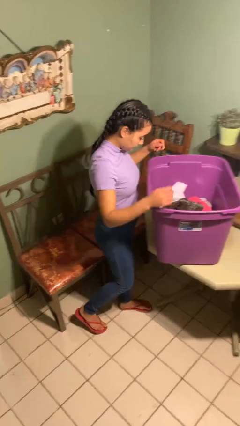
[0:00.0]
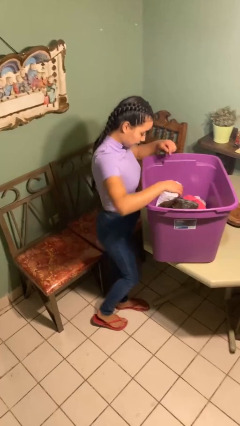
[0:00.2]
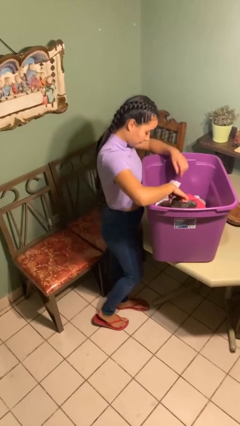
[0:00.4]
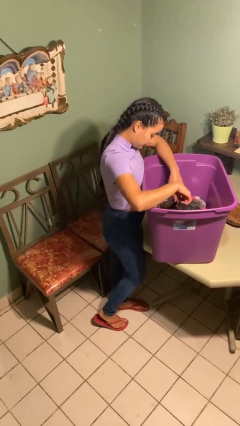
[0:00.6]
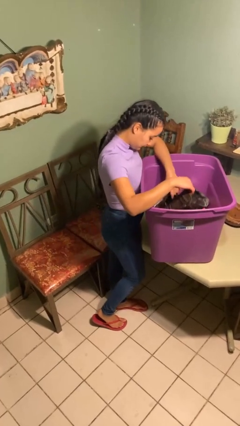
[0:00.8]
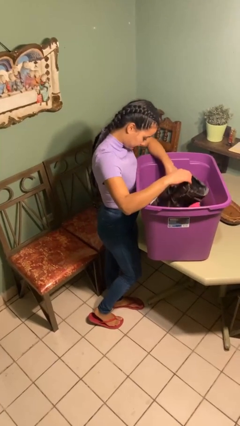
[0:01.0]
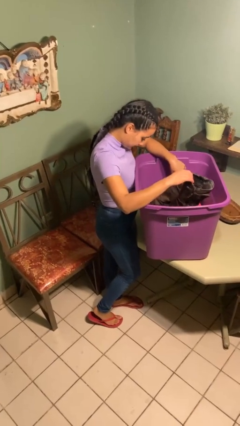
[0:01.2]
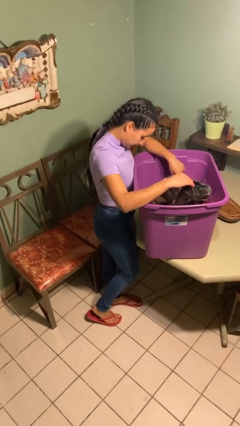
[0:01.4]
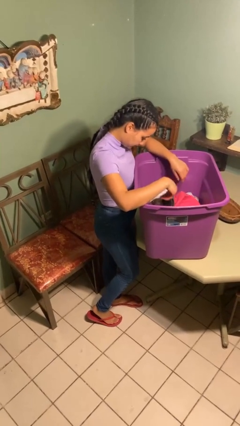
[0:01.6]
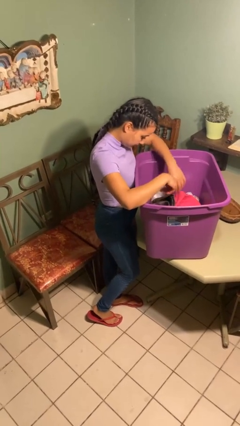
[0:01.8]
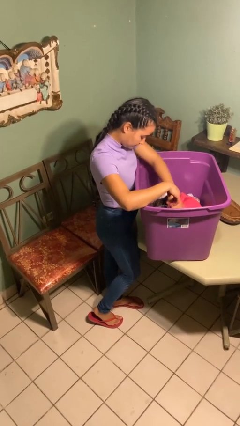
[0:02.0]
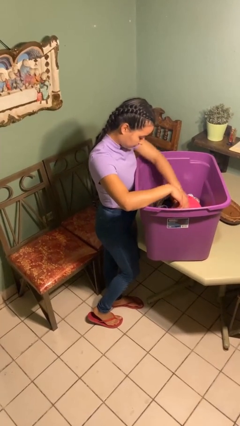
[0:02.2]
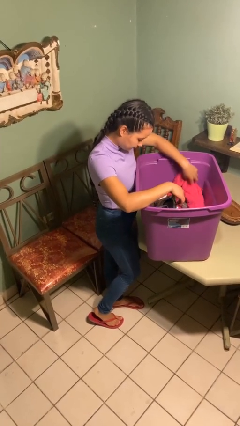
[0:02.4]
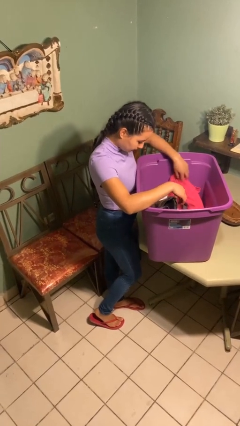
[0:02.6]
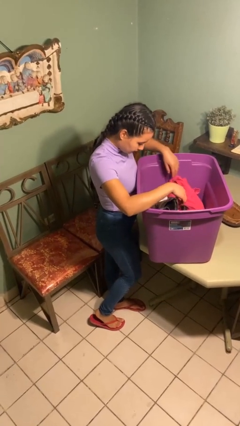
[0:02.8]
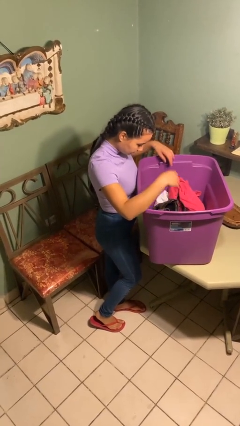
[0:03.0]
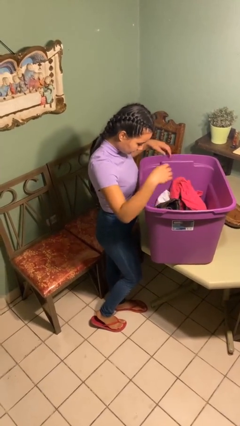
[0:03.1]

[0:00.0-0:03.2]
person searches in box

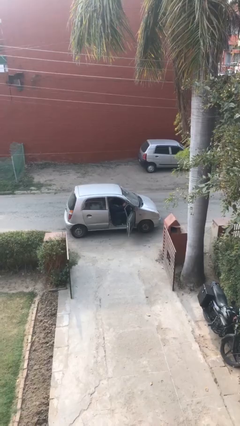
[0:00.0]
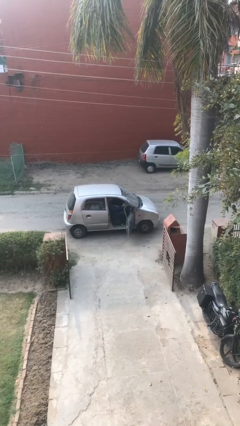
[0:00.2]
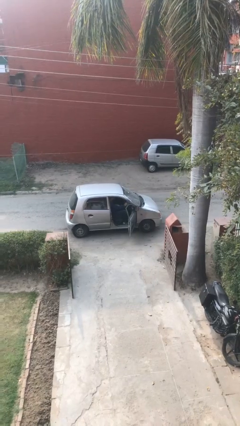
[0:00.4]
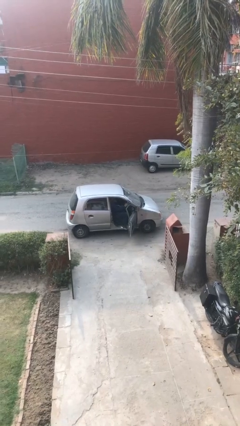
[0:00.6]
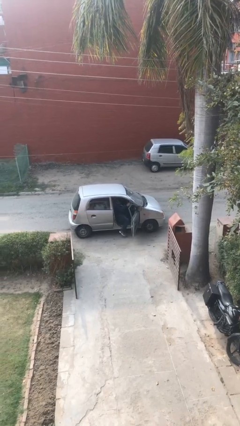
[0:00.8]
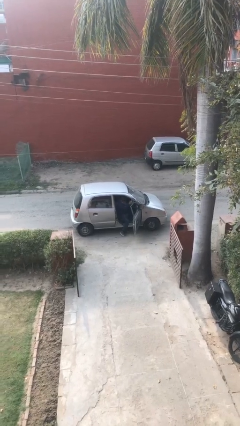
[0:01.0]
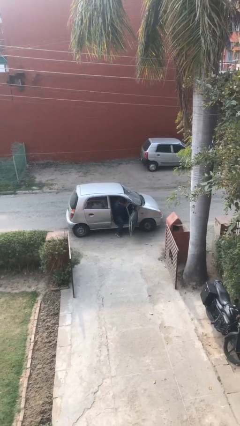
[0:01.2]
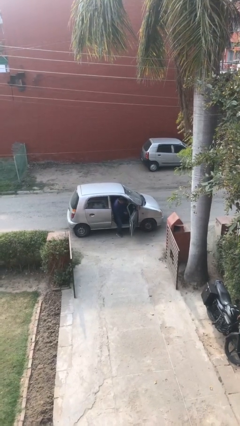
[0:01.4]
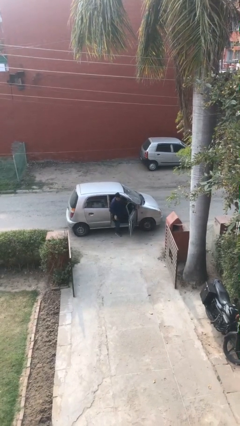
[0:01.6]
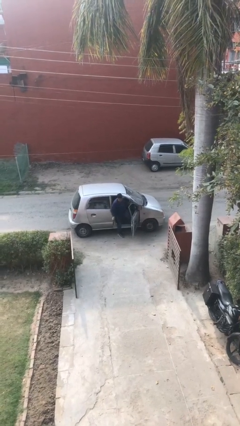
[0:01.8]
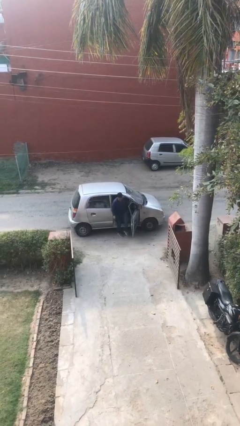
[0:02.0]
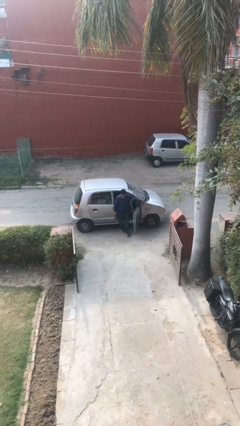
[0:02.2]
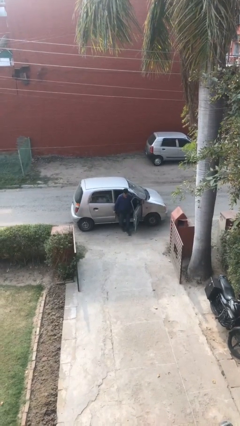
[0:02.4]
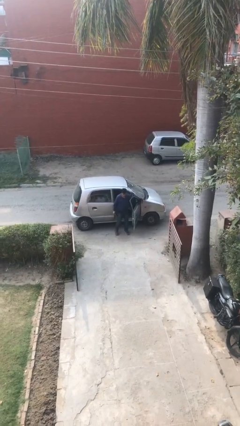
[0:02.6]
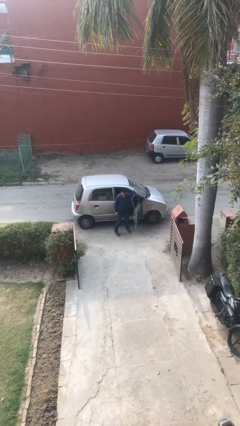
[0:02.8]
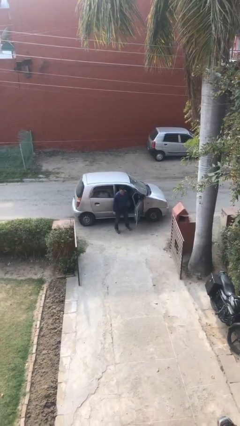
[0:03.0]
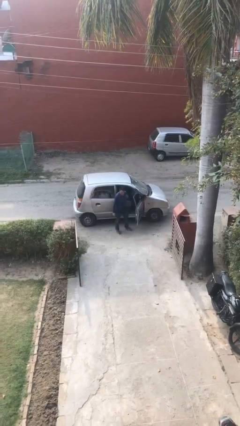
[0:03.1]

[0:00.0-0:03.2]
person exits car

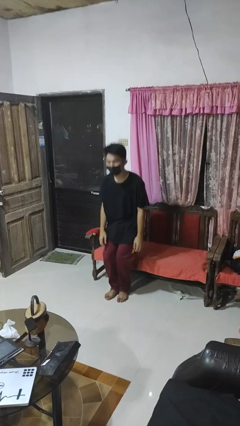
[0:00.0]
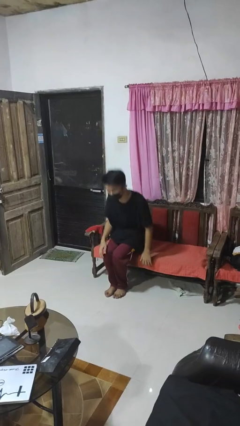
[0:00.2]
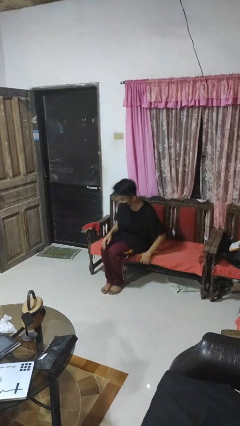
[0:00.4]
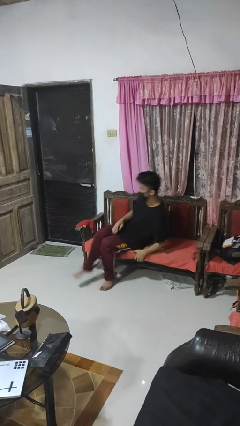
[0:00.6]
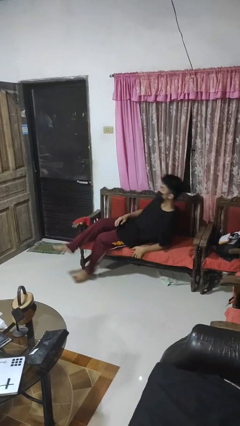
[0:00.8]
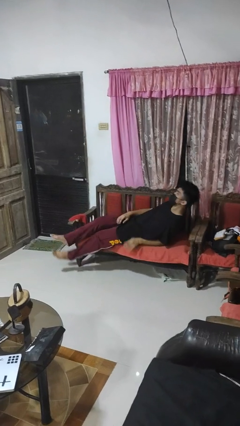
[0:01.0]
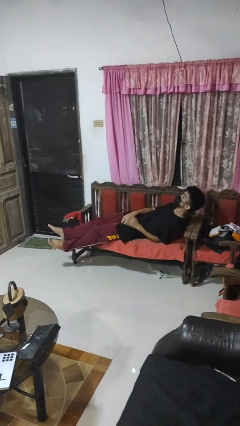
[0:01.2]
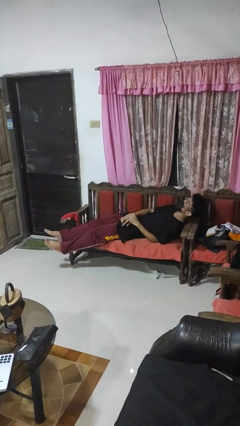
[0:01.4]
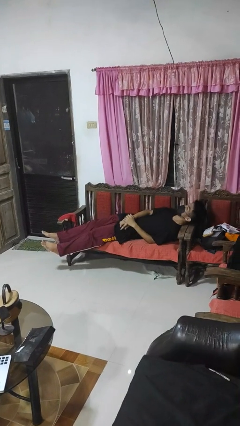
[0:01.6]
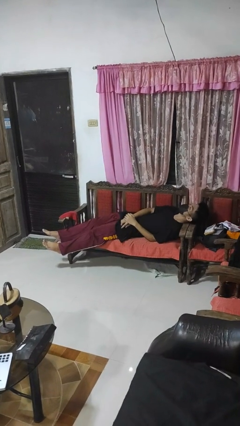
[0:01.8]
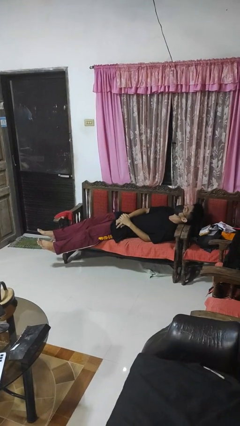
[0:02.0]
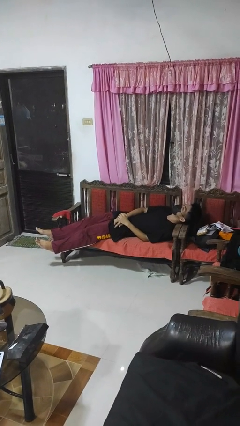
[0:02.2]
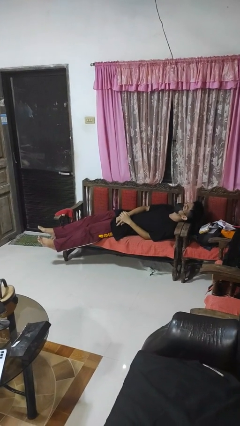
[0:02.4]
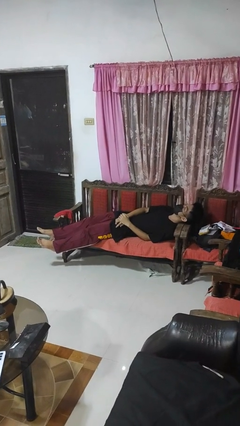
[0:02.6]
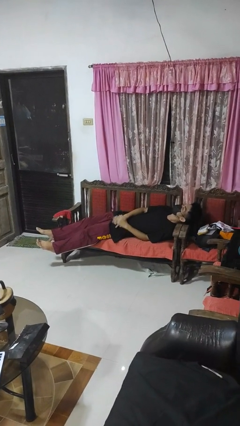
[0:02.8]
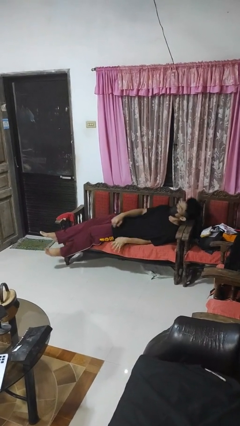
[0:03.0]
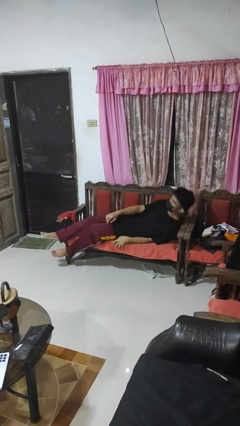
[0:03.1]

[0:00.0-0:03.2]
person lies down on couch

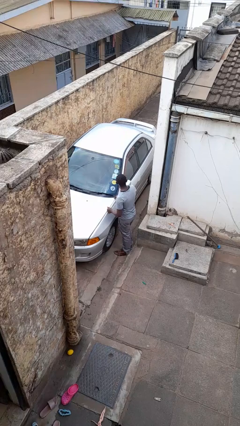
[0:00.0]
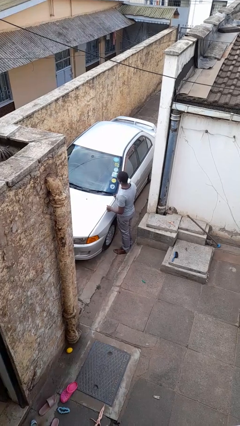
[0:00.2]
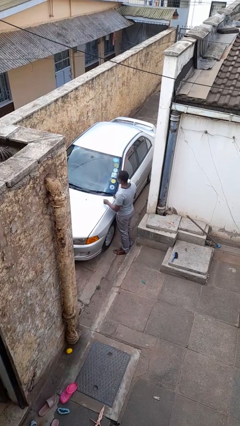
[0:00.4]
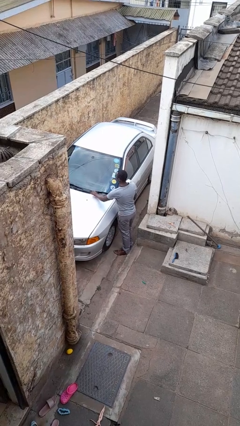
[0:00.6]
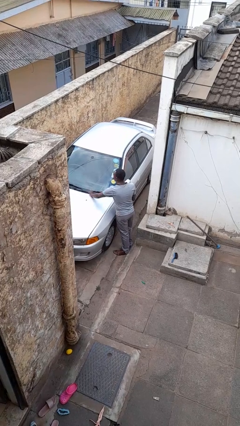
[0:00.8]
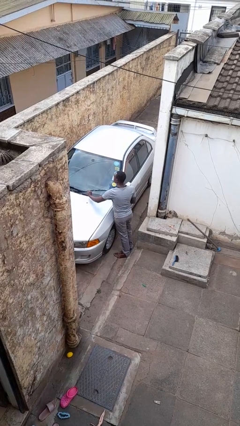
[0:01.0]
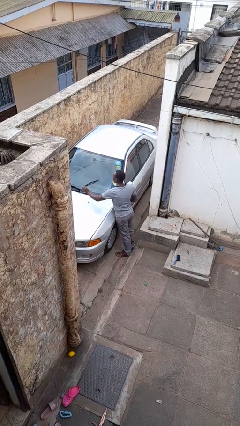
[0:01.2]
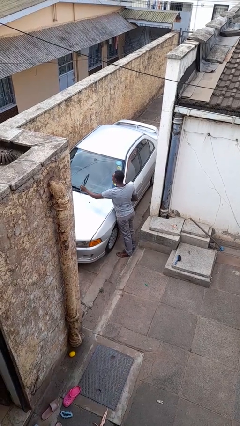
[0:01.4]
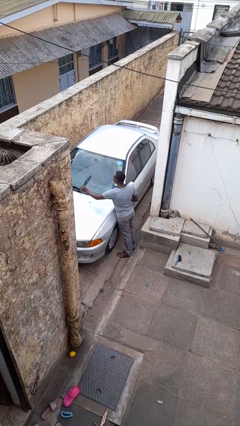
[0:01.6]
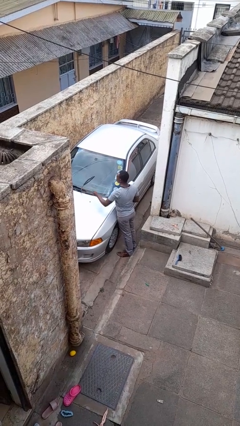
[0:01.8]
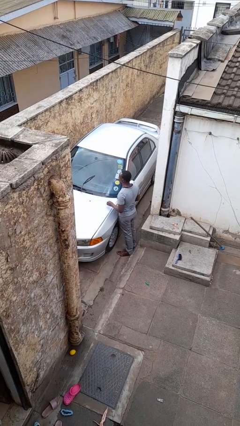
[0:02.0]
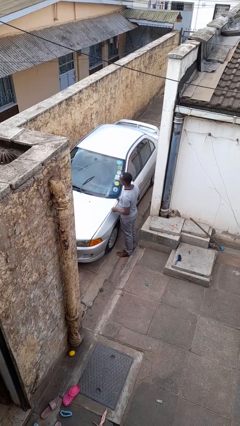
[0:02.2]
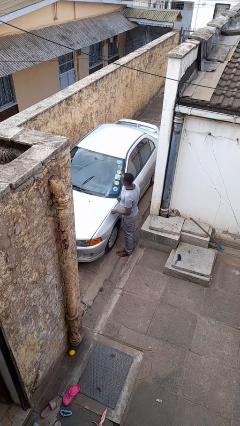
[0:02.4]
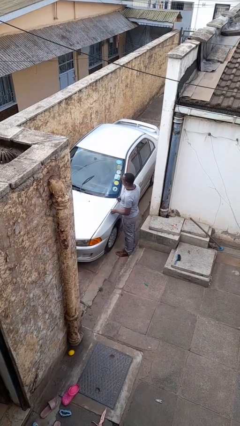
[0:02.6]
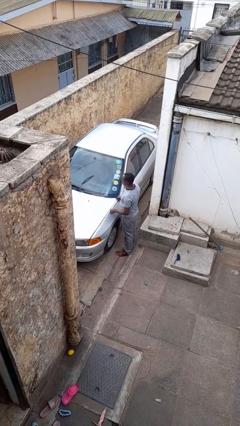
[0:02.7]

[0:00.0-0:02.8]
person flips up car wipers

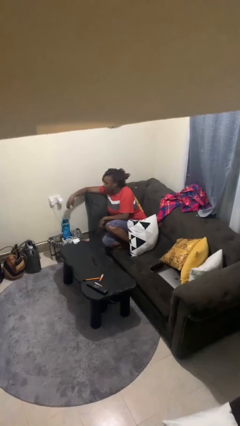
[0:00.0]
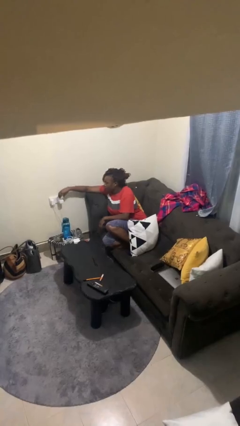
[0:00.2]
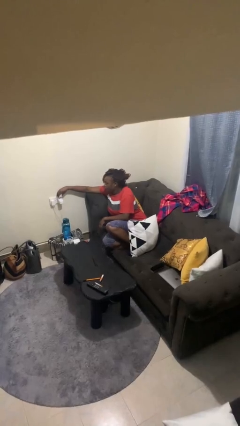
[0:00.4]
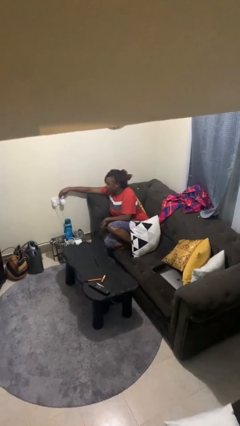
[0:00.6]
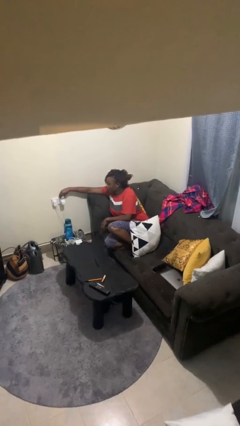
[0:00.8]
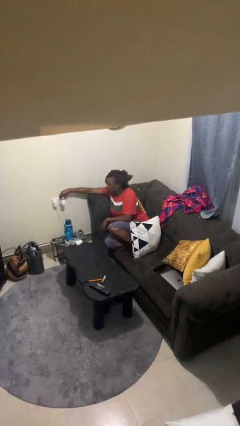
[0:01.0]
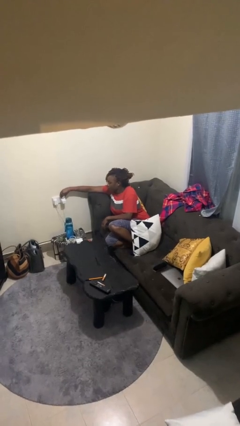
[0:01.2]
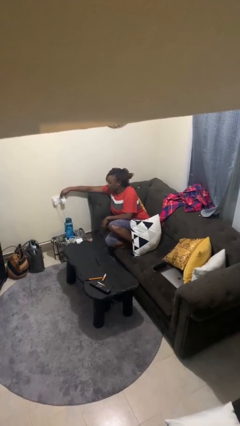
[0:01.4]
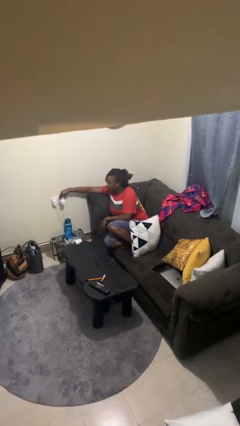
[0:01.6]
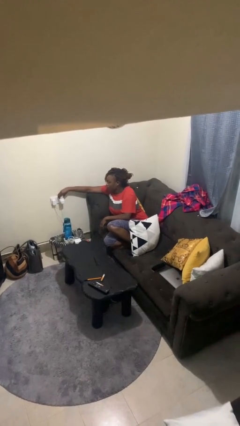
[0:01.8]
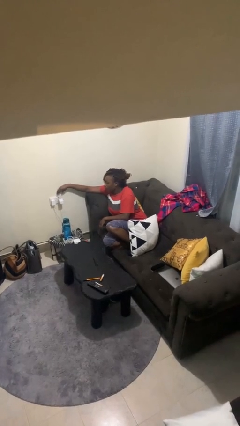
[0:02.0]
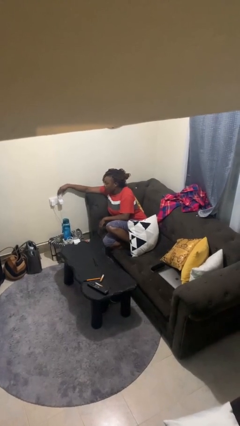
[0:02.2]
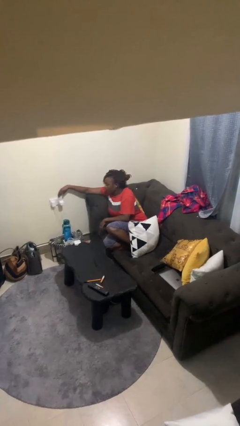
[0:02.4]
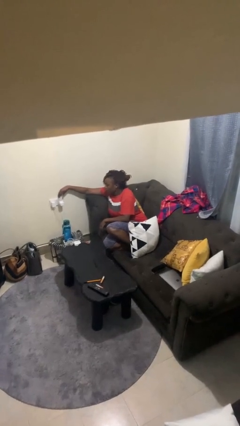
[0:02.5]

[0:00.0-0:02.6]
person plugs into electrical socket

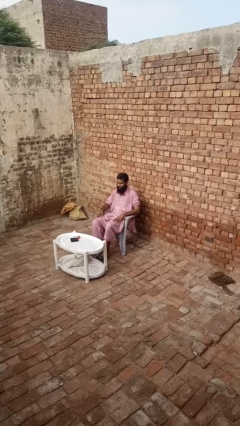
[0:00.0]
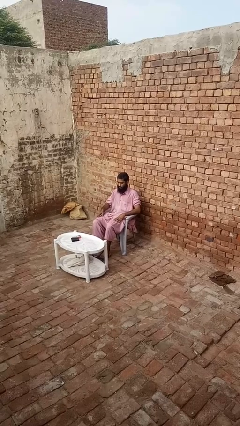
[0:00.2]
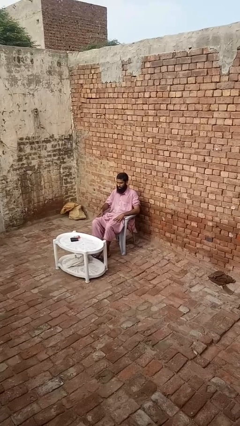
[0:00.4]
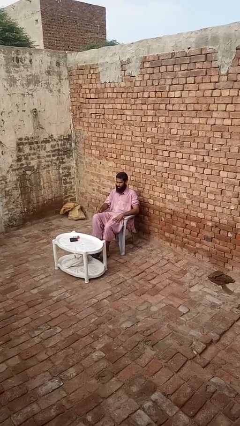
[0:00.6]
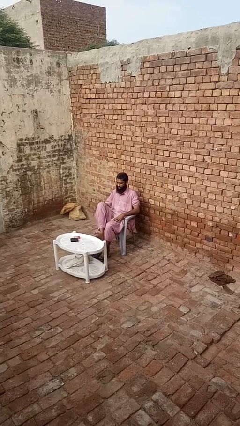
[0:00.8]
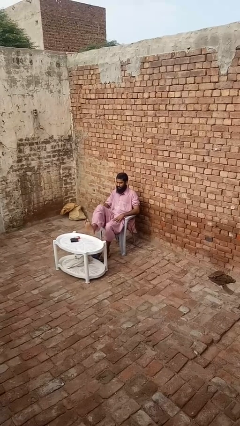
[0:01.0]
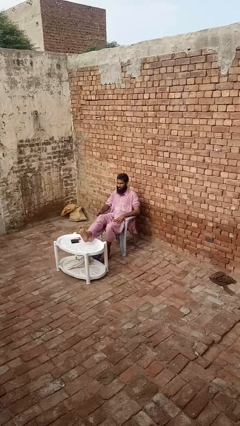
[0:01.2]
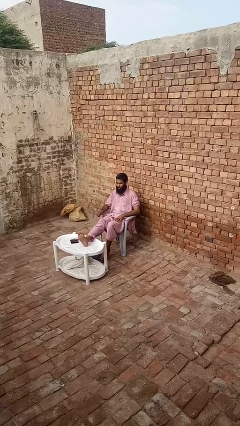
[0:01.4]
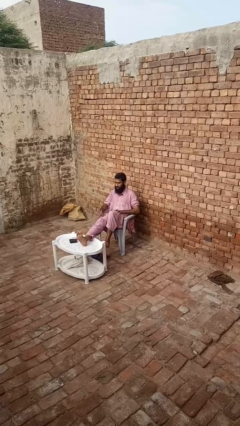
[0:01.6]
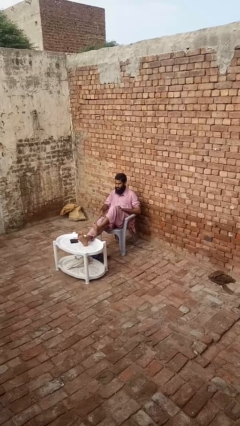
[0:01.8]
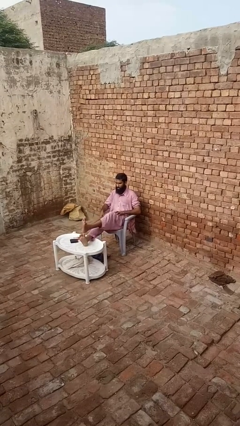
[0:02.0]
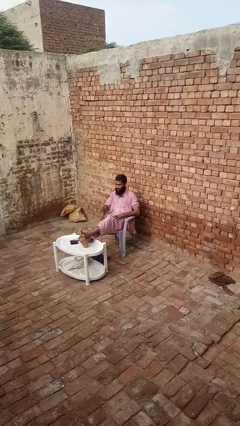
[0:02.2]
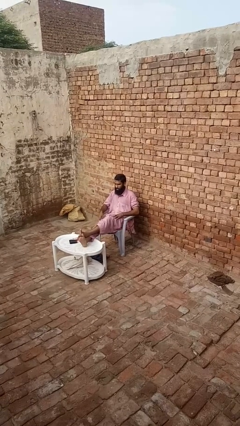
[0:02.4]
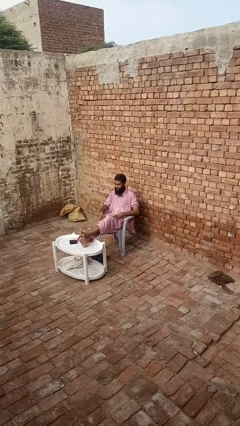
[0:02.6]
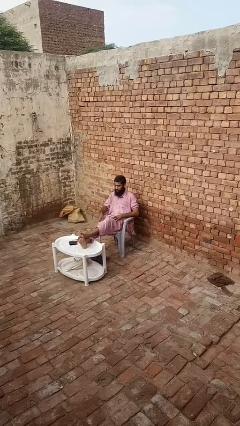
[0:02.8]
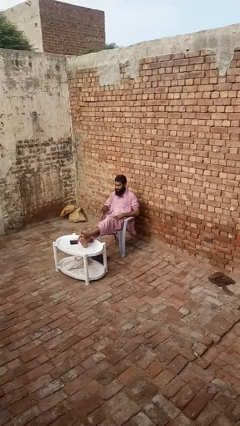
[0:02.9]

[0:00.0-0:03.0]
person puts feet up
